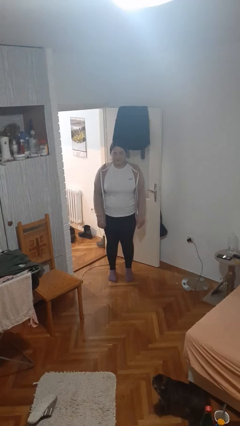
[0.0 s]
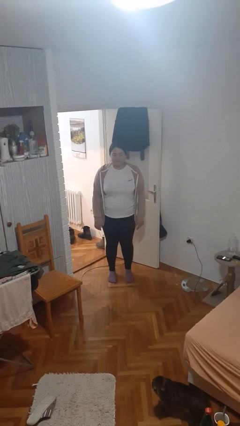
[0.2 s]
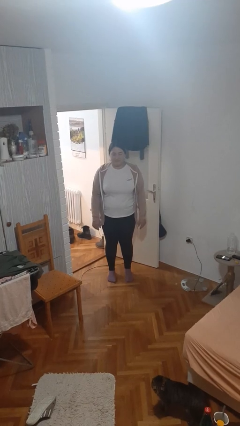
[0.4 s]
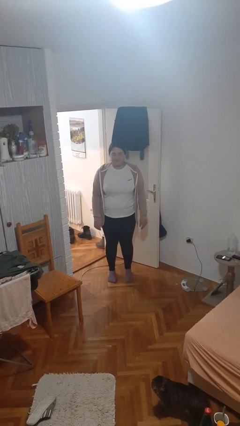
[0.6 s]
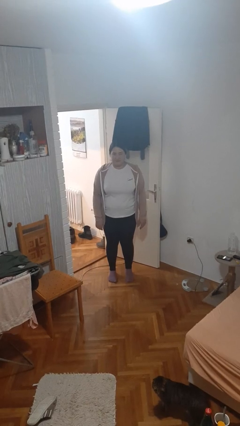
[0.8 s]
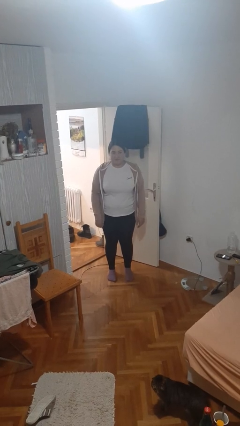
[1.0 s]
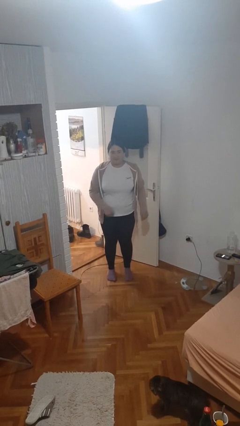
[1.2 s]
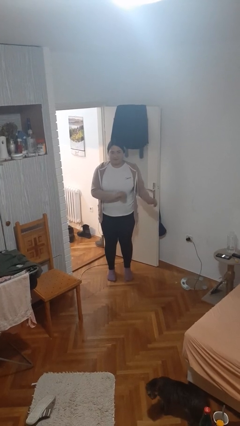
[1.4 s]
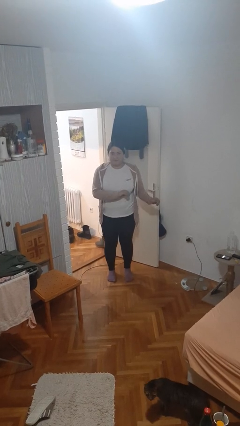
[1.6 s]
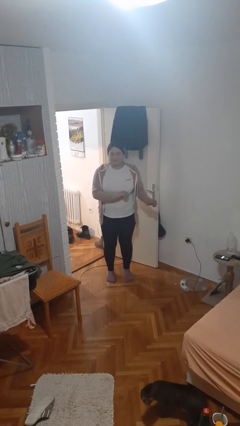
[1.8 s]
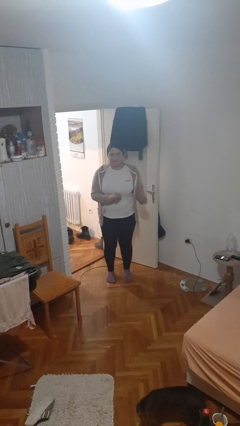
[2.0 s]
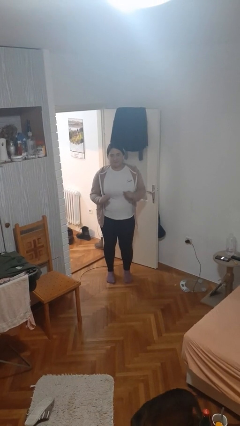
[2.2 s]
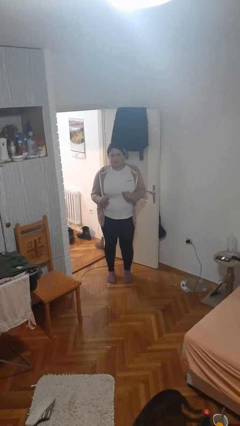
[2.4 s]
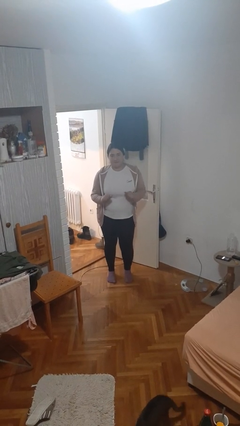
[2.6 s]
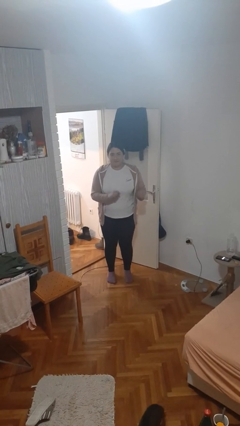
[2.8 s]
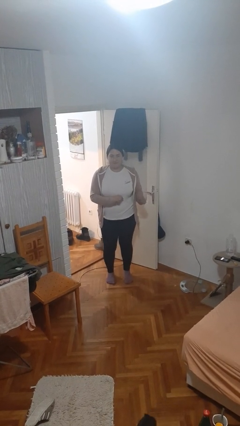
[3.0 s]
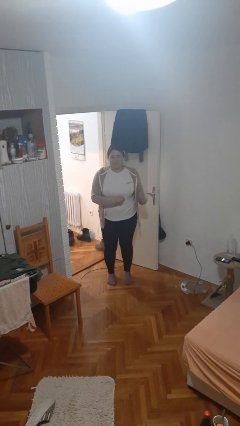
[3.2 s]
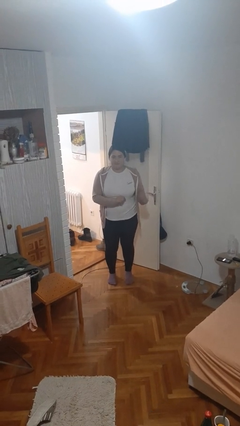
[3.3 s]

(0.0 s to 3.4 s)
person dances in place

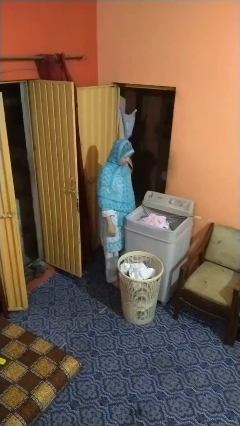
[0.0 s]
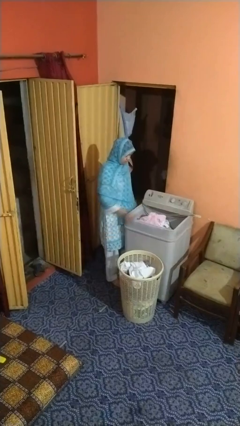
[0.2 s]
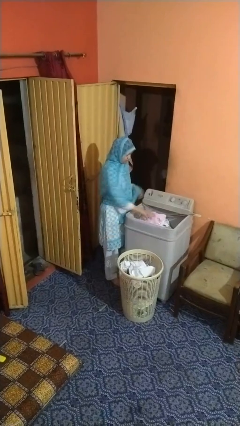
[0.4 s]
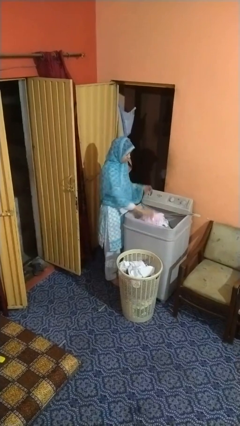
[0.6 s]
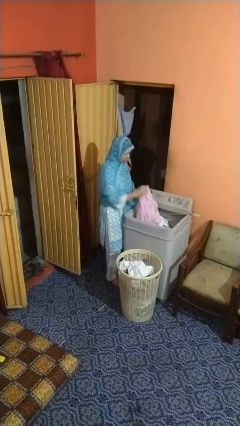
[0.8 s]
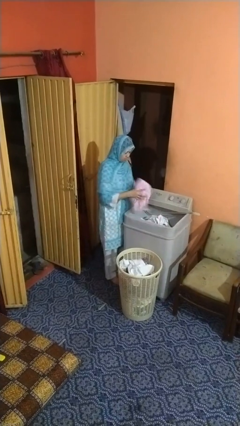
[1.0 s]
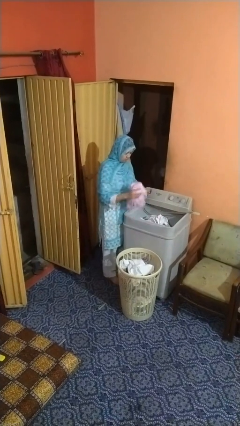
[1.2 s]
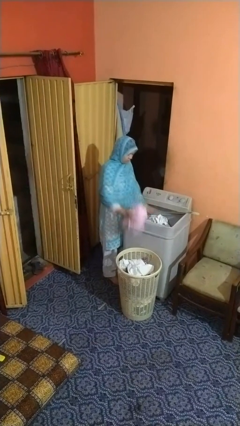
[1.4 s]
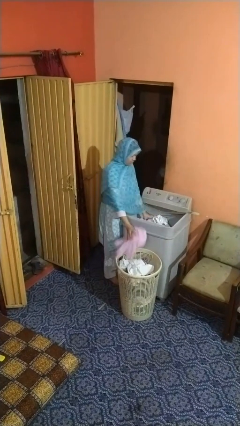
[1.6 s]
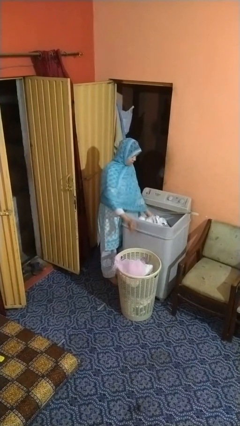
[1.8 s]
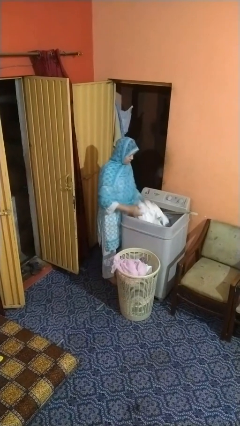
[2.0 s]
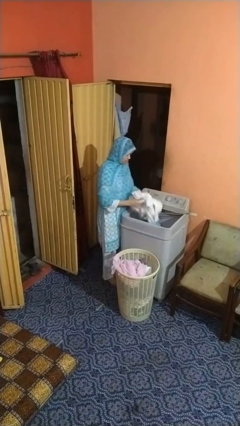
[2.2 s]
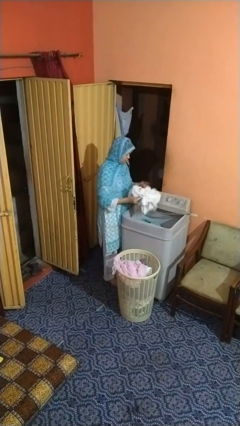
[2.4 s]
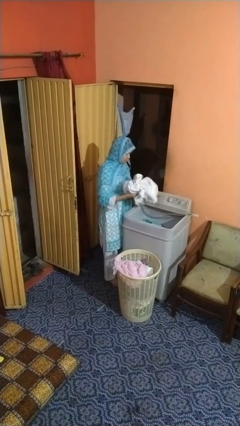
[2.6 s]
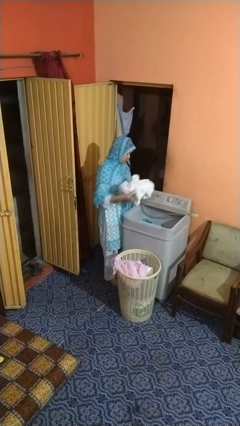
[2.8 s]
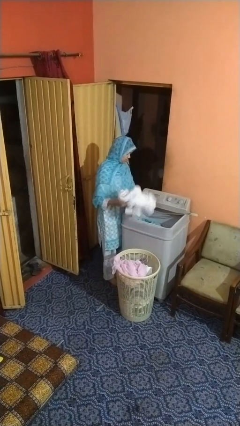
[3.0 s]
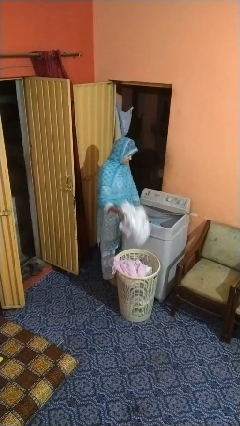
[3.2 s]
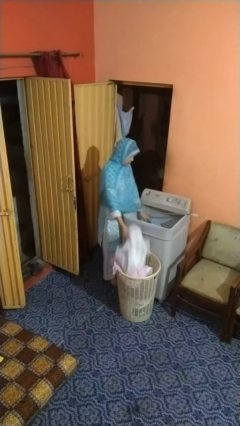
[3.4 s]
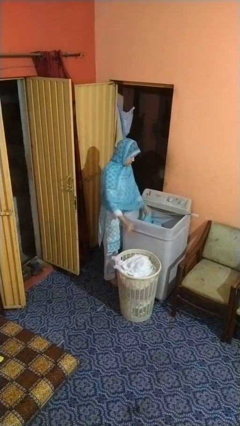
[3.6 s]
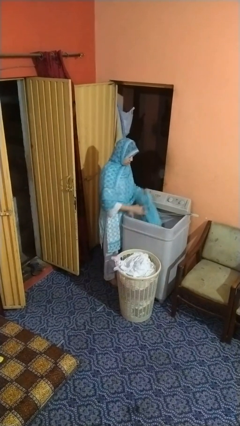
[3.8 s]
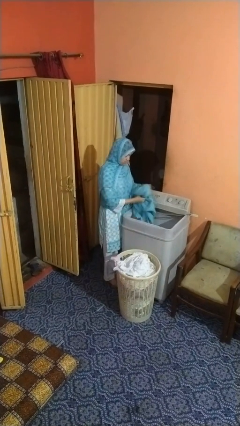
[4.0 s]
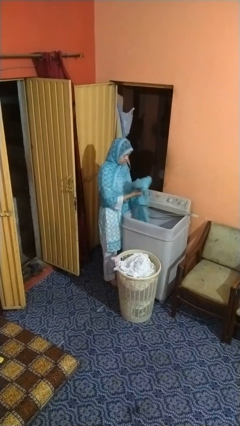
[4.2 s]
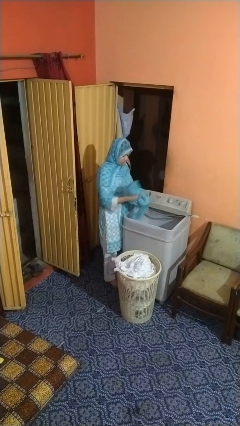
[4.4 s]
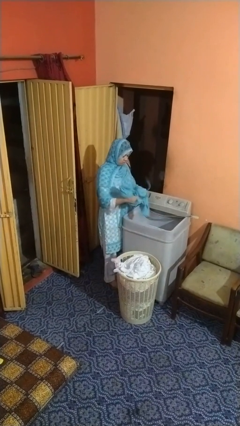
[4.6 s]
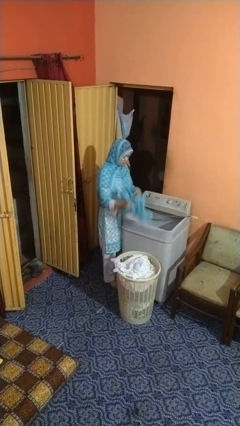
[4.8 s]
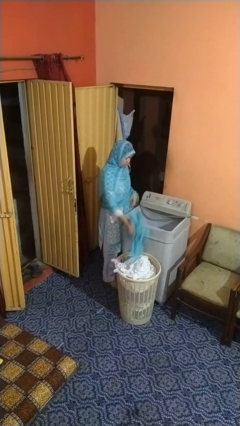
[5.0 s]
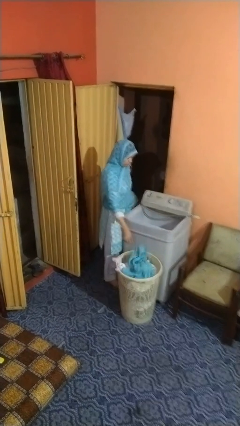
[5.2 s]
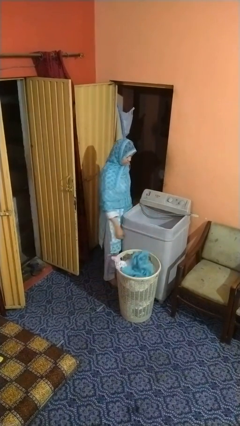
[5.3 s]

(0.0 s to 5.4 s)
person unloads clotheswasher

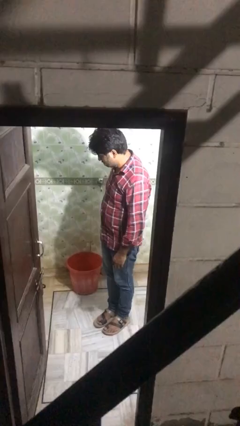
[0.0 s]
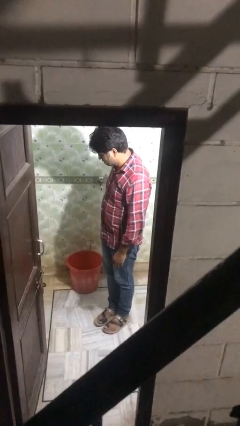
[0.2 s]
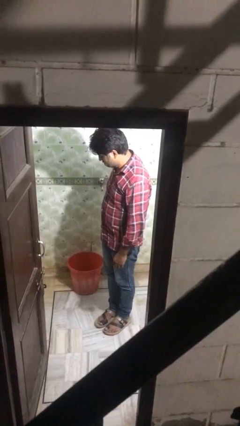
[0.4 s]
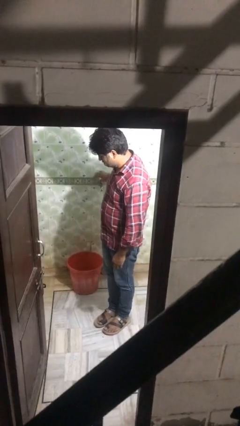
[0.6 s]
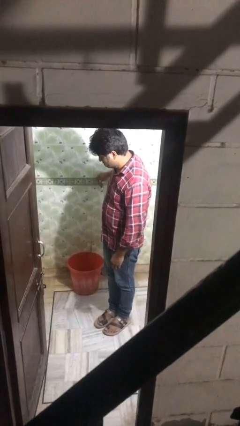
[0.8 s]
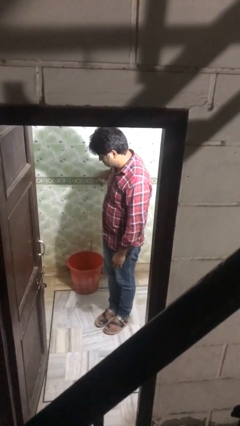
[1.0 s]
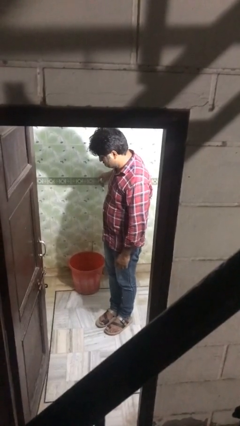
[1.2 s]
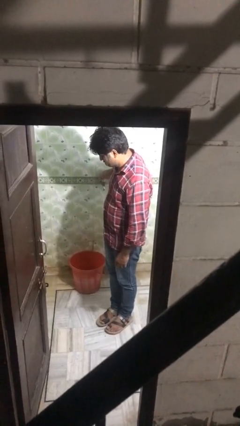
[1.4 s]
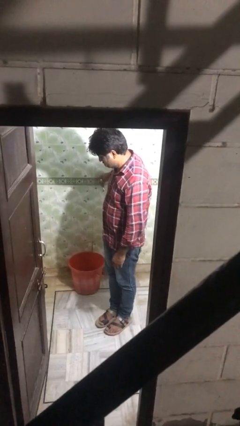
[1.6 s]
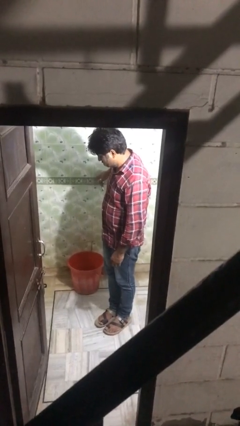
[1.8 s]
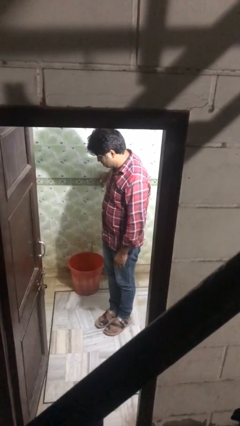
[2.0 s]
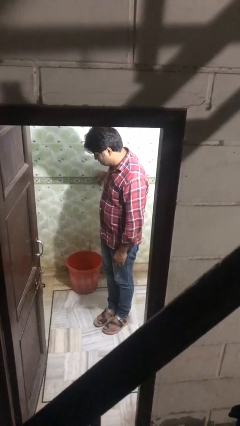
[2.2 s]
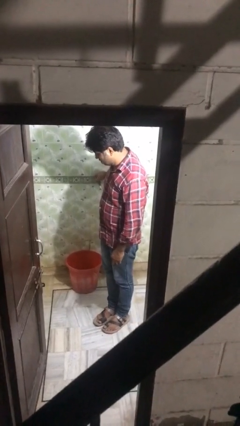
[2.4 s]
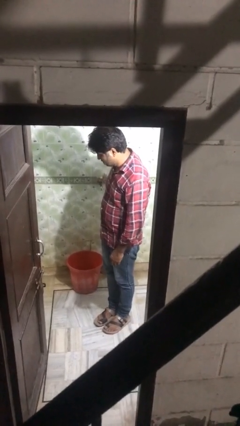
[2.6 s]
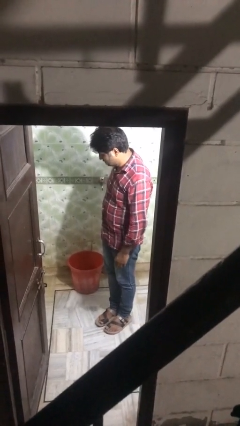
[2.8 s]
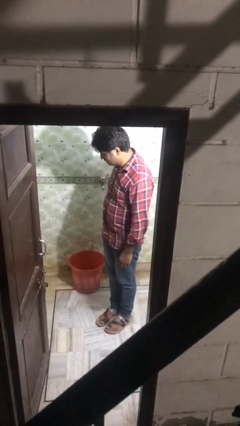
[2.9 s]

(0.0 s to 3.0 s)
person turns off faucet

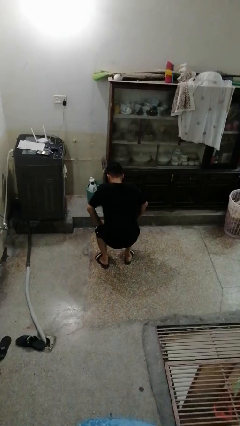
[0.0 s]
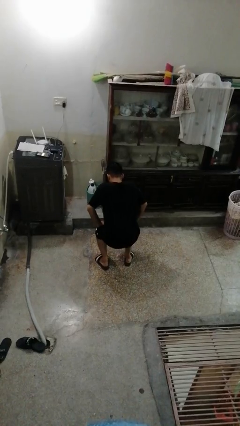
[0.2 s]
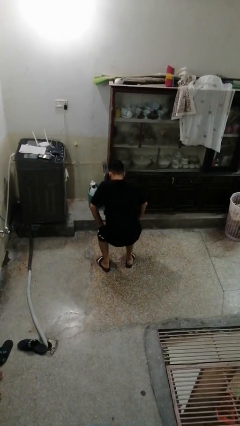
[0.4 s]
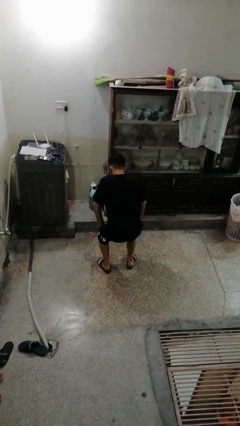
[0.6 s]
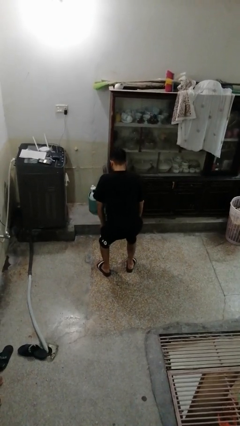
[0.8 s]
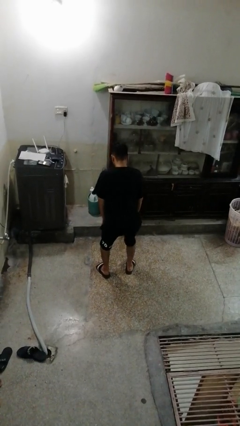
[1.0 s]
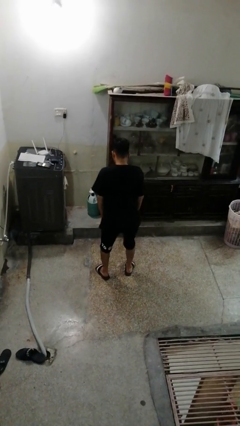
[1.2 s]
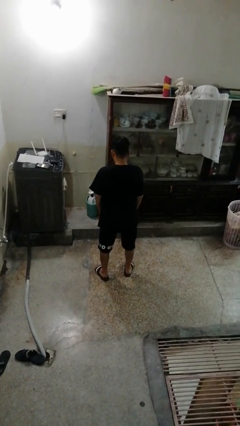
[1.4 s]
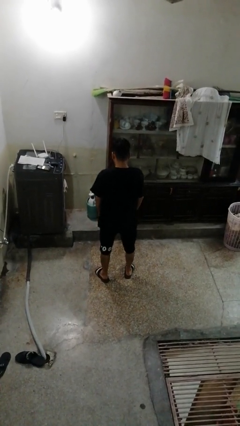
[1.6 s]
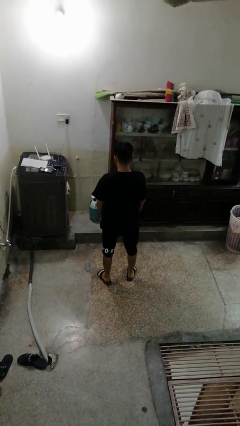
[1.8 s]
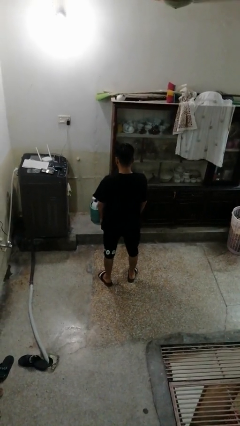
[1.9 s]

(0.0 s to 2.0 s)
person stands up

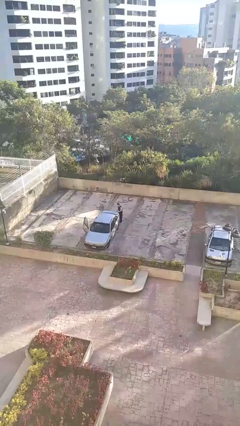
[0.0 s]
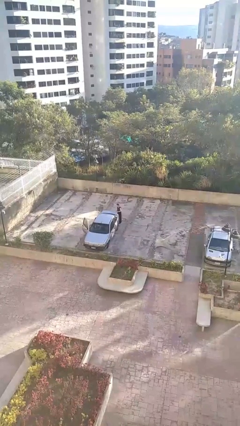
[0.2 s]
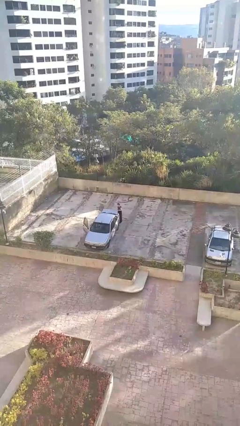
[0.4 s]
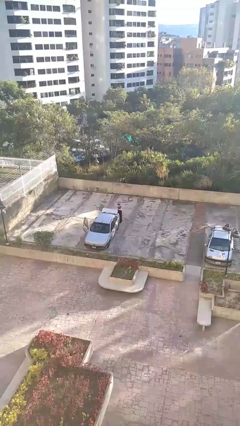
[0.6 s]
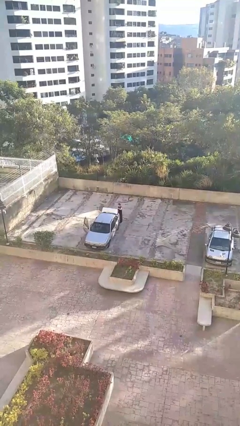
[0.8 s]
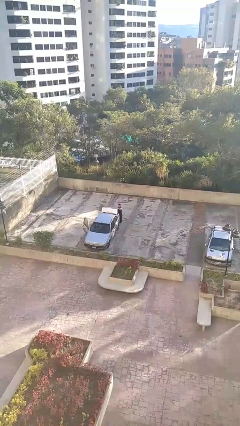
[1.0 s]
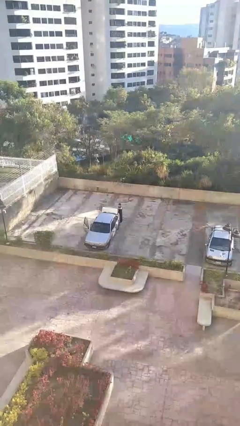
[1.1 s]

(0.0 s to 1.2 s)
person opens car trunk

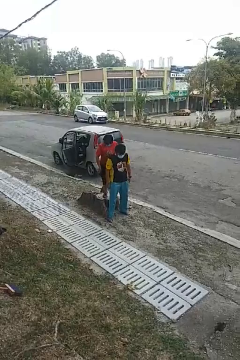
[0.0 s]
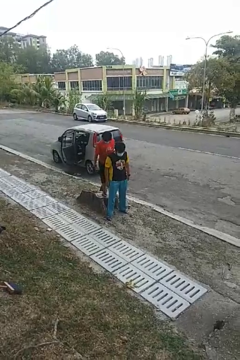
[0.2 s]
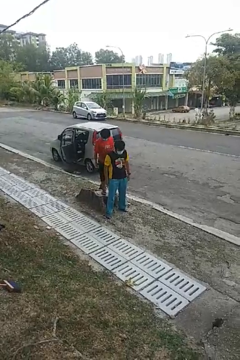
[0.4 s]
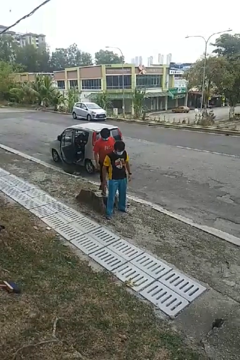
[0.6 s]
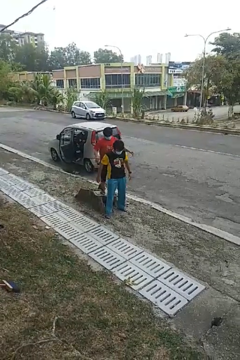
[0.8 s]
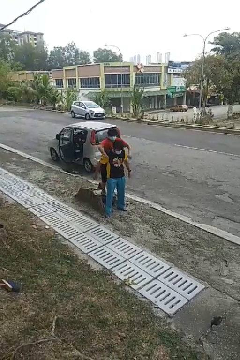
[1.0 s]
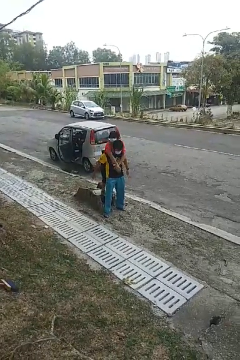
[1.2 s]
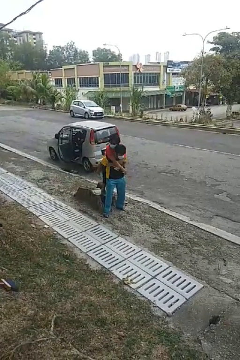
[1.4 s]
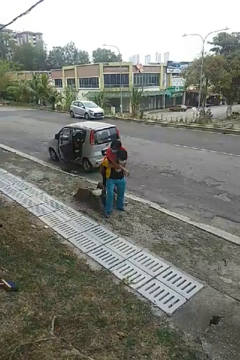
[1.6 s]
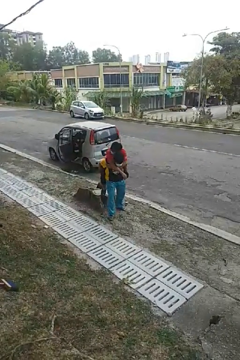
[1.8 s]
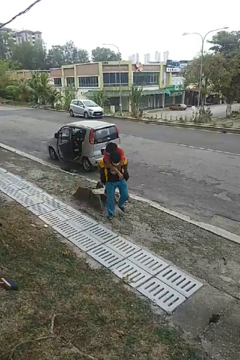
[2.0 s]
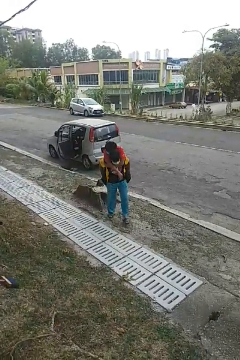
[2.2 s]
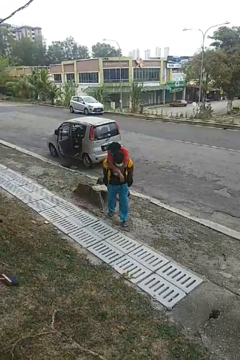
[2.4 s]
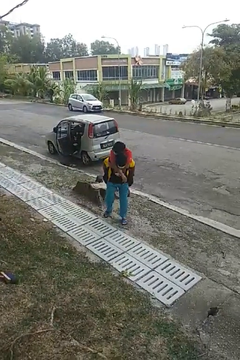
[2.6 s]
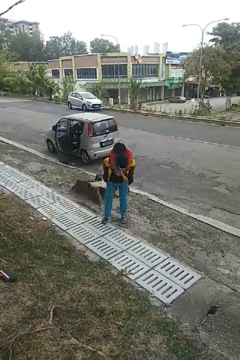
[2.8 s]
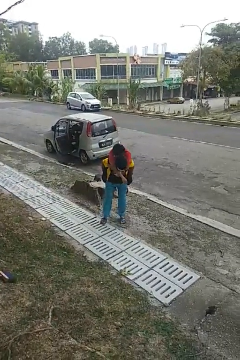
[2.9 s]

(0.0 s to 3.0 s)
person carries person over shoulder
